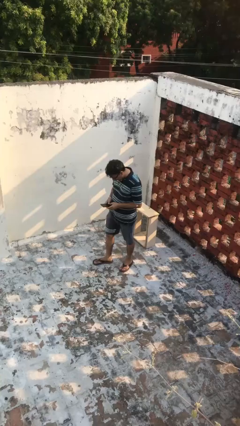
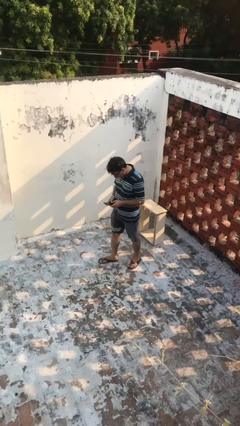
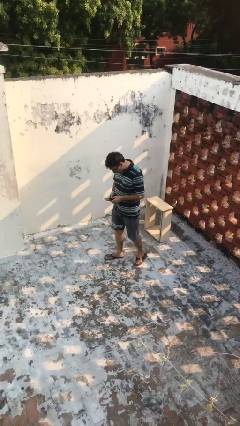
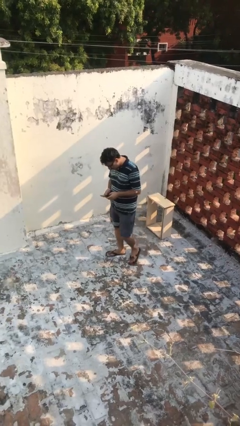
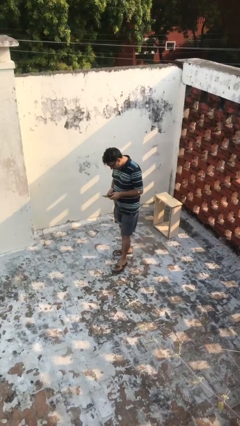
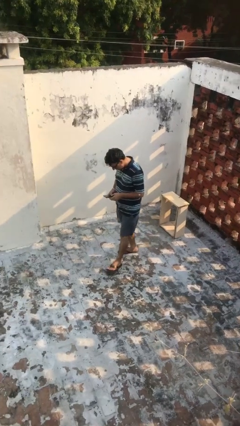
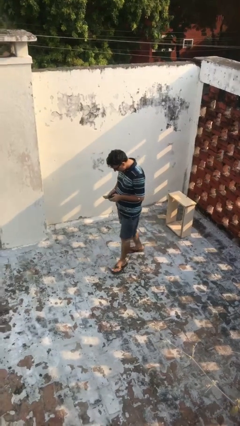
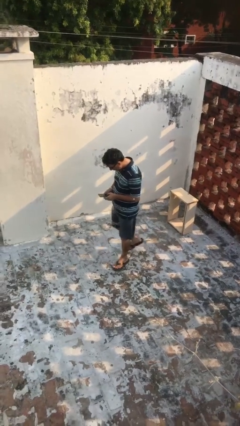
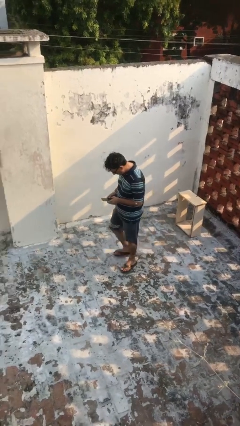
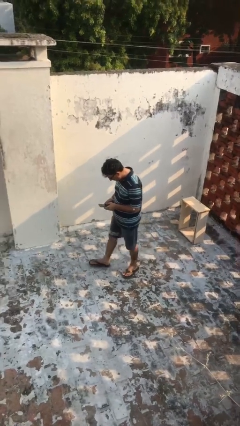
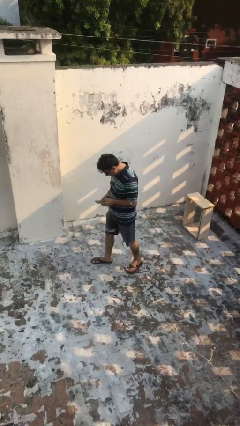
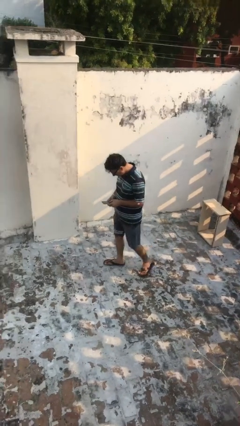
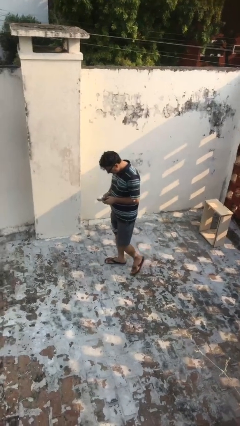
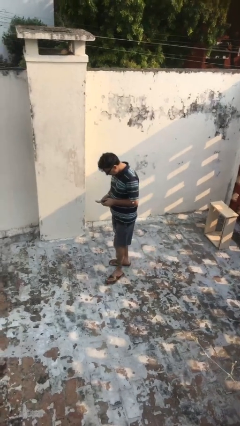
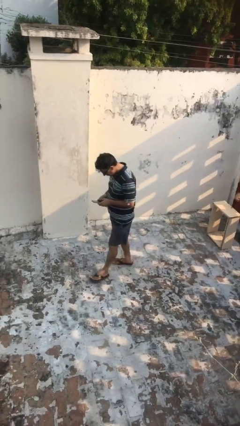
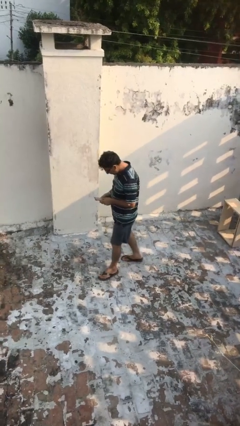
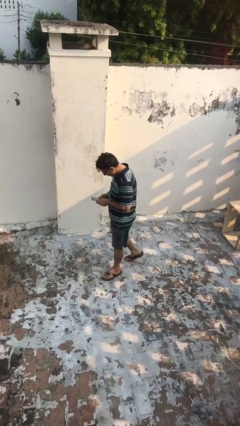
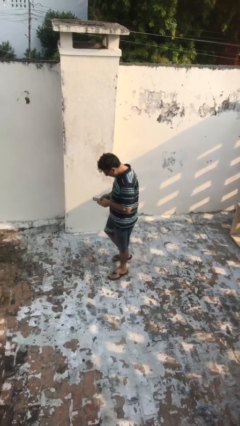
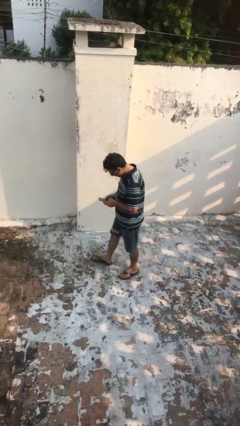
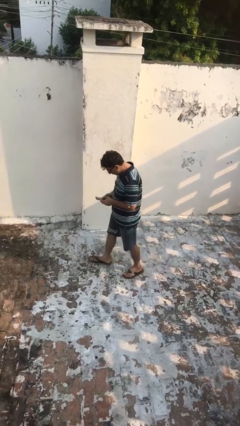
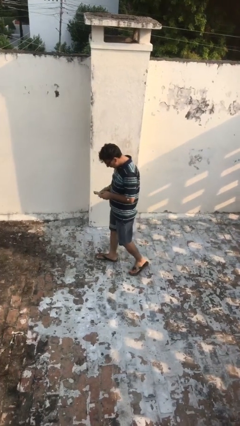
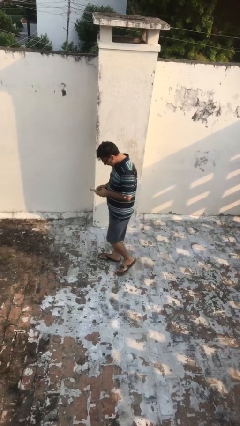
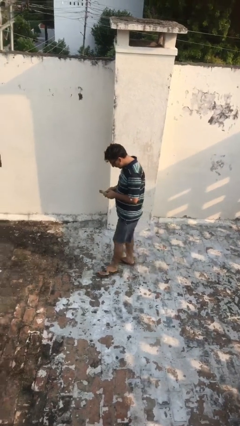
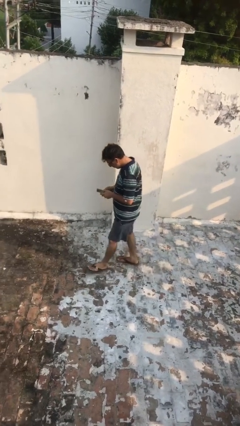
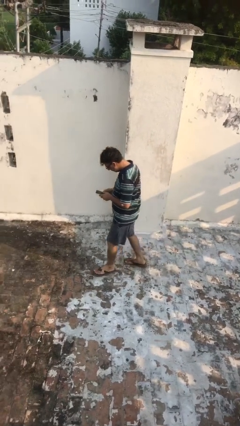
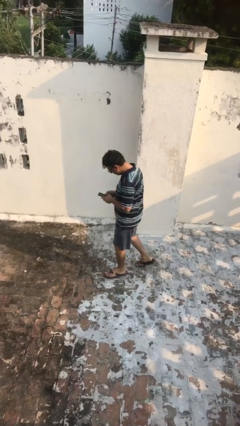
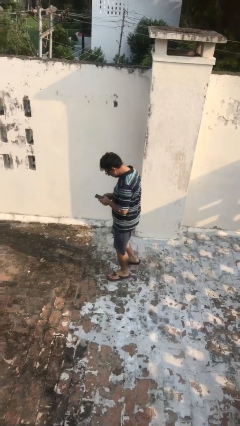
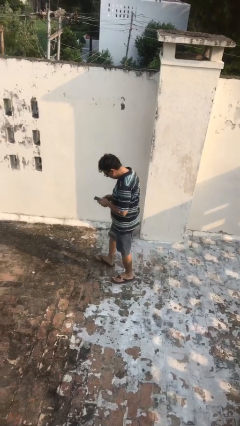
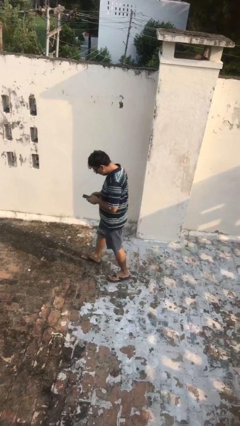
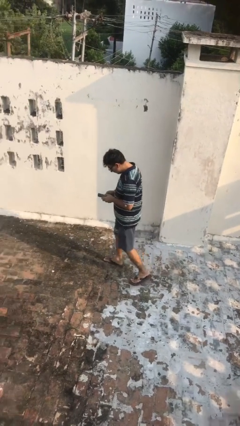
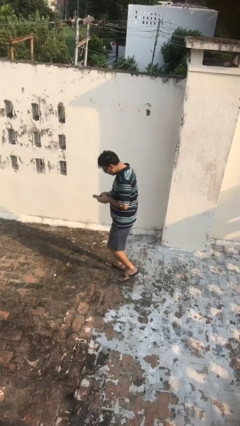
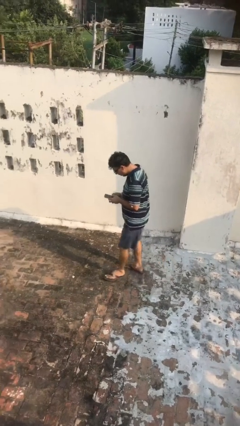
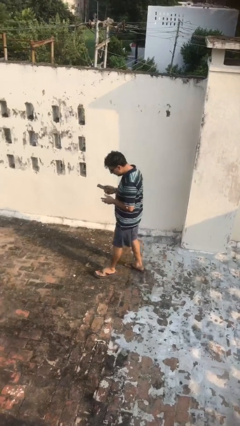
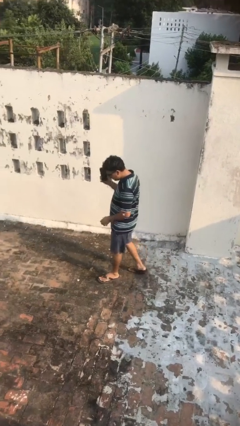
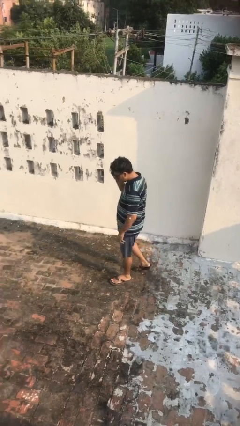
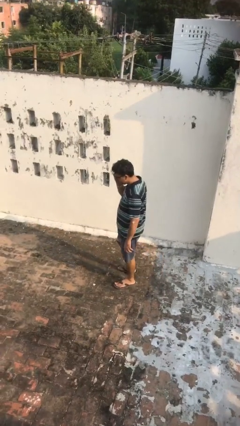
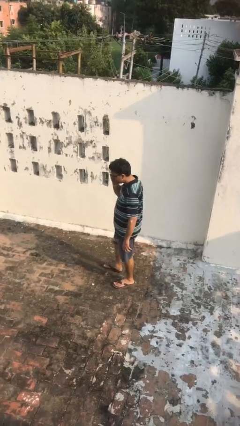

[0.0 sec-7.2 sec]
person texts on phone

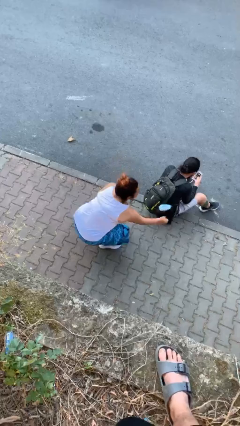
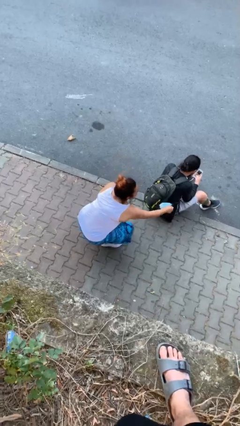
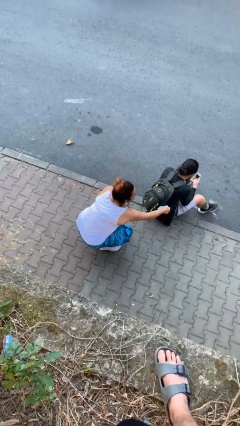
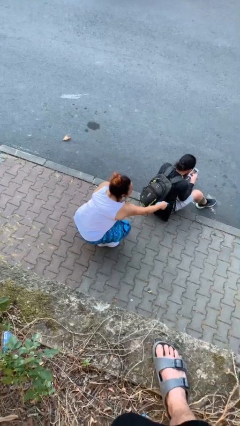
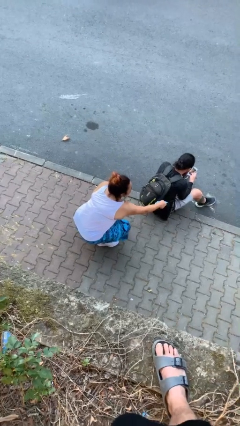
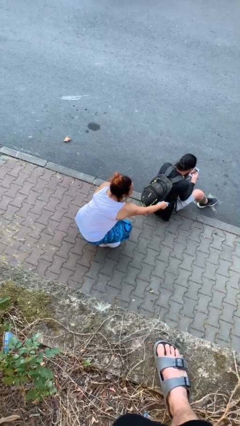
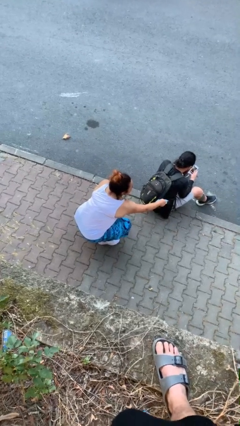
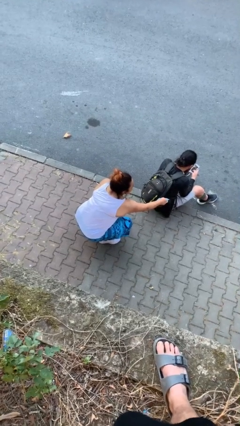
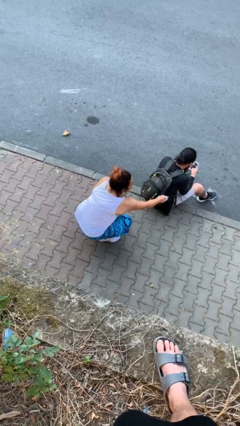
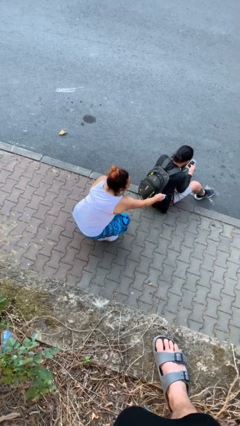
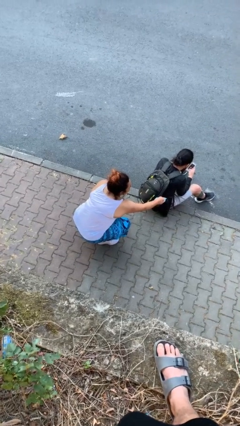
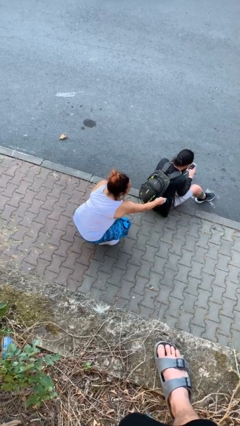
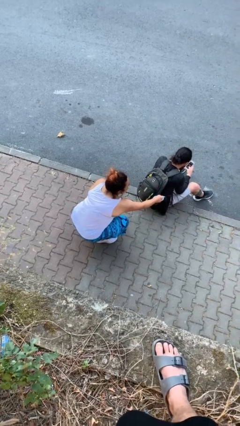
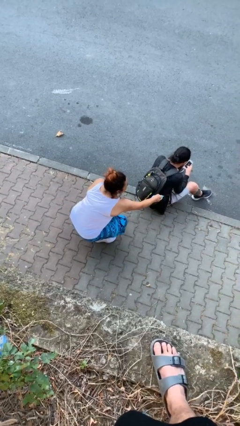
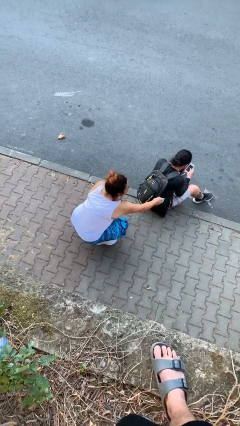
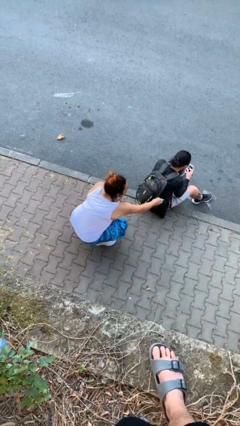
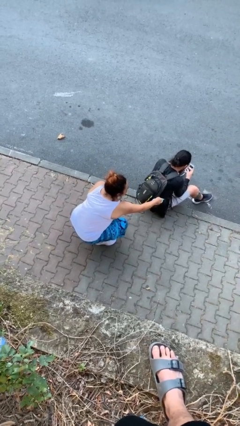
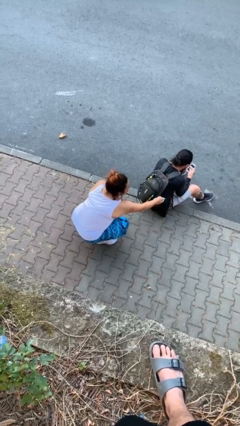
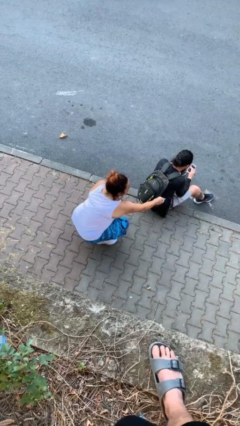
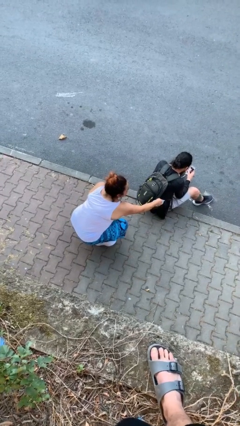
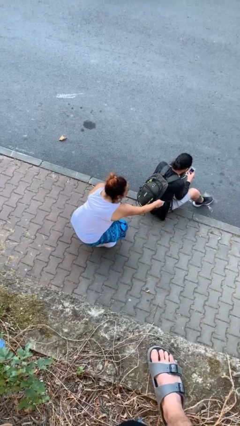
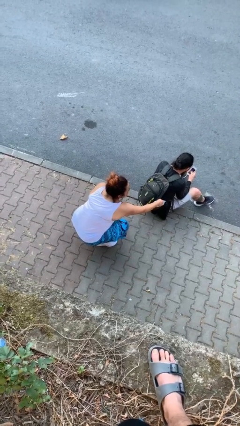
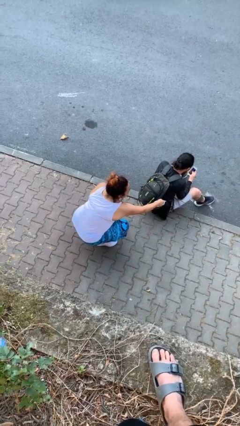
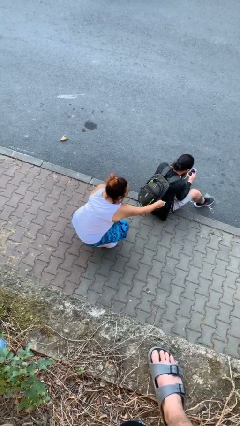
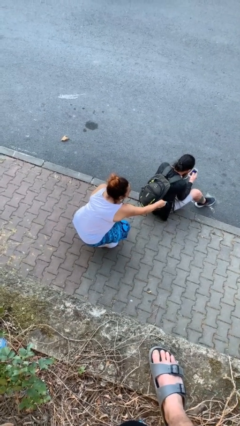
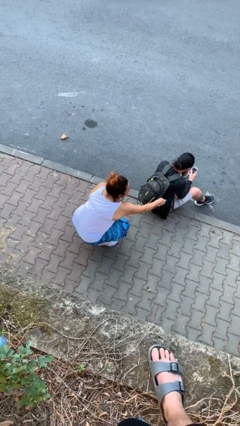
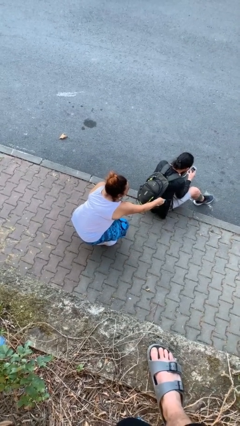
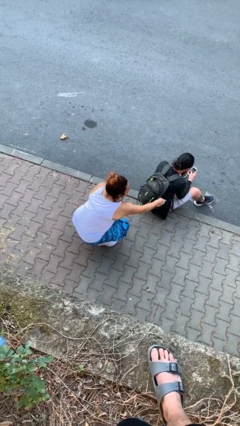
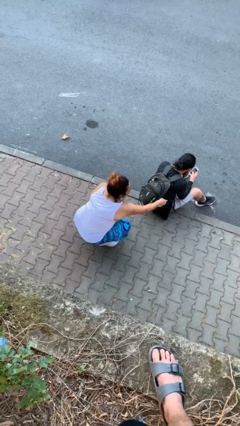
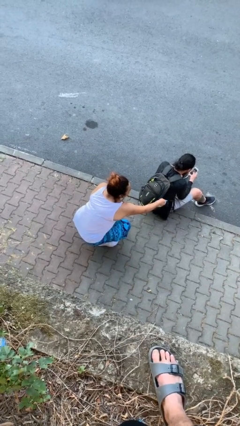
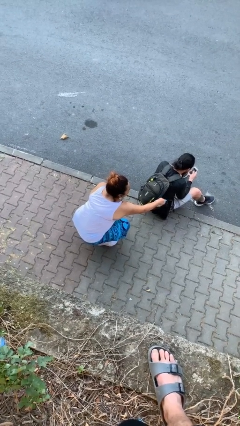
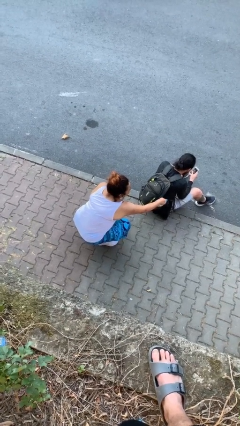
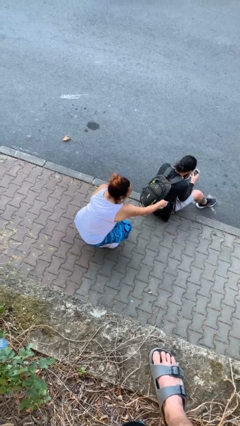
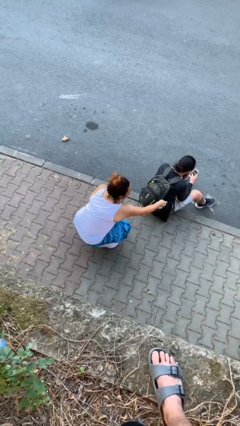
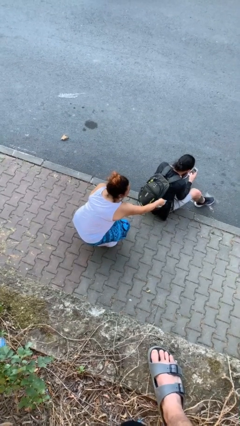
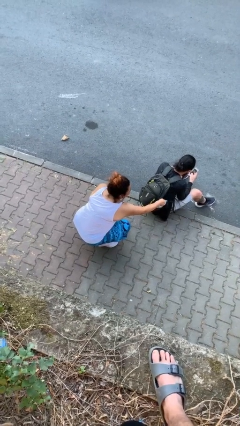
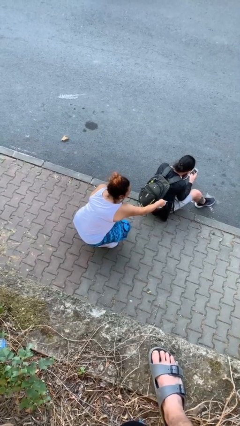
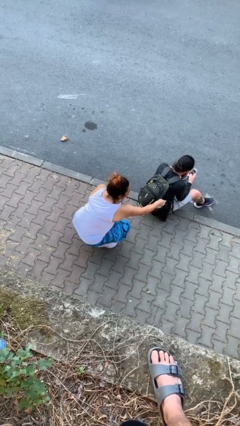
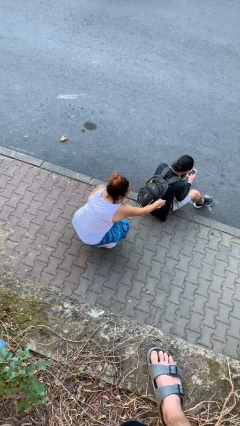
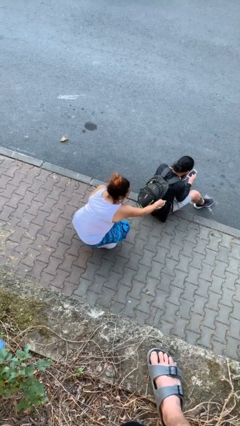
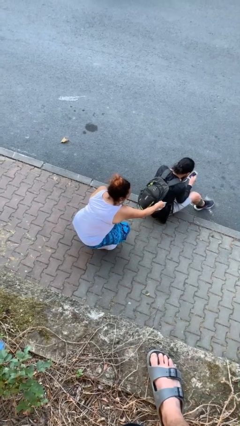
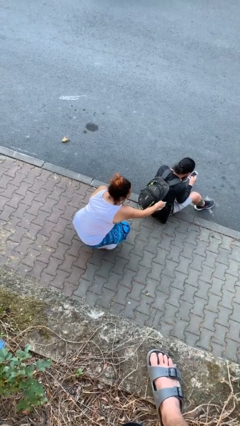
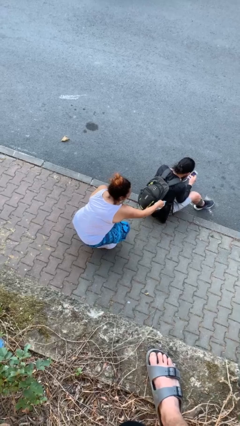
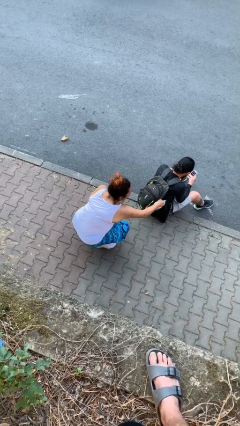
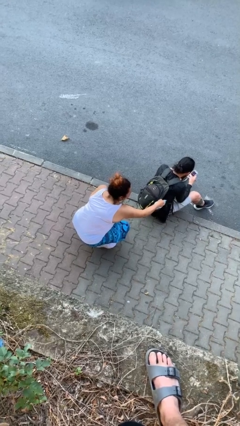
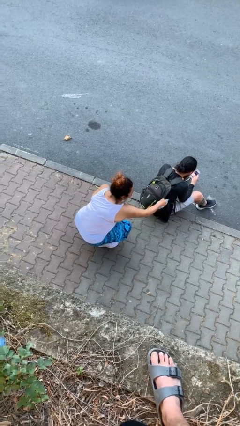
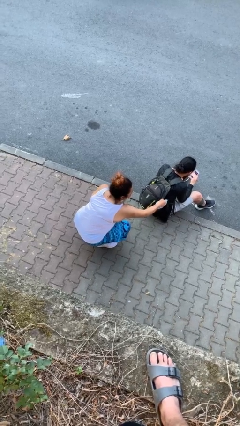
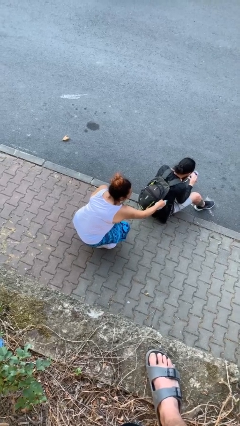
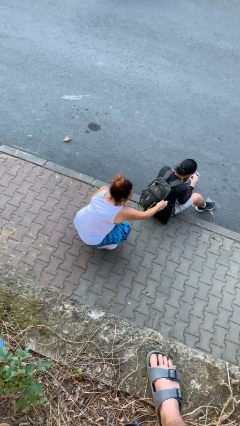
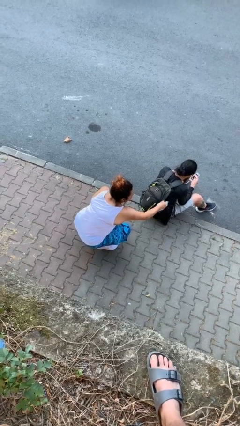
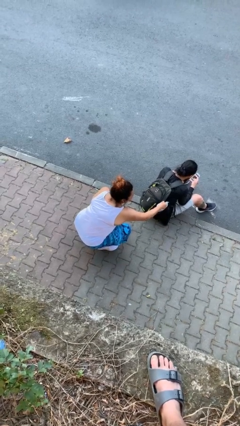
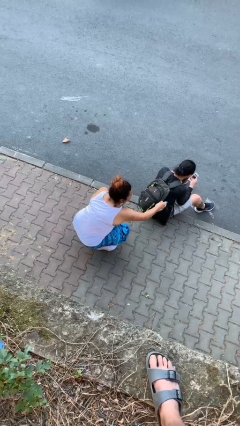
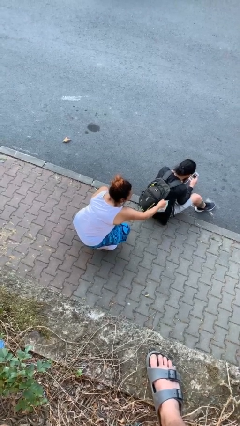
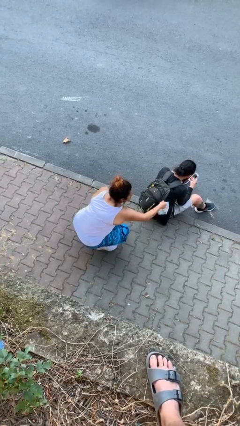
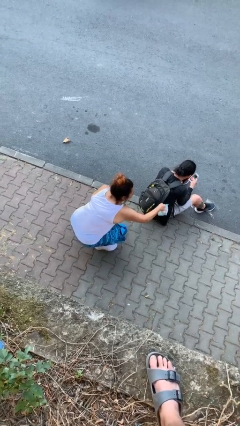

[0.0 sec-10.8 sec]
person steals object from person
